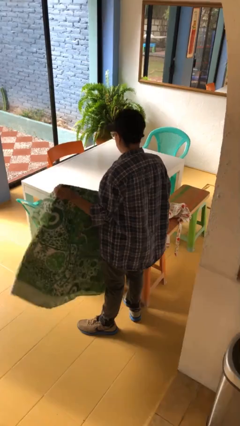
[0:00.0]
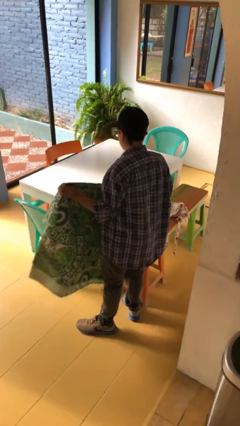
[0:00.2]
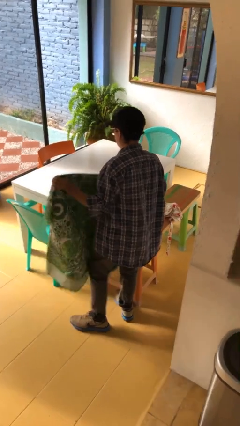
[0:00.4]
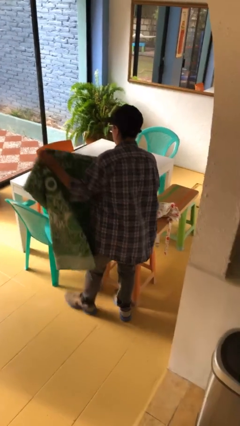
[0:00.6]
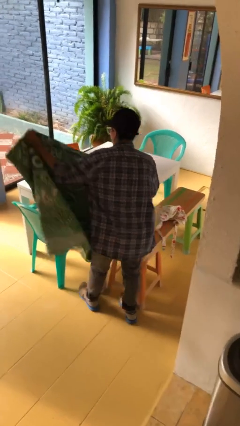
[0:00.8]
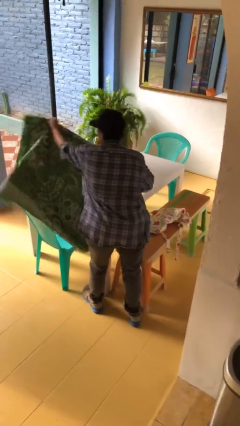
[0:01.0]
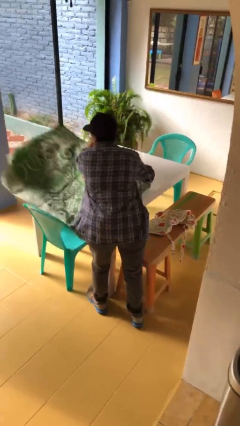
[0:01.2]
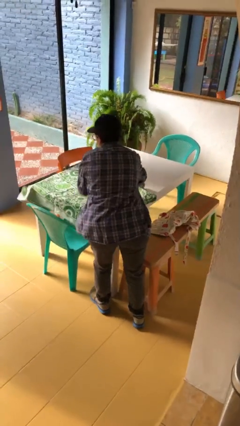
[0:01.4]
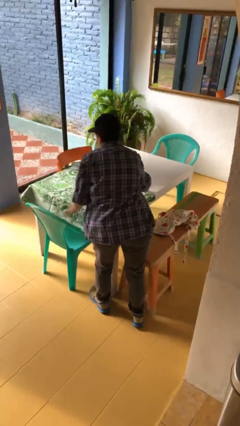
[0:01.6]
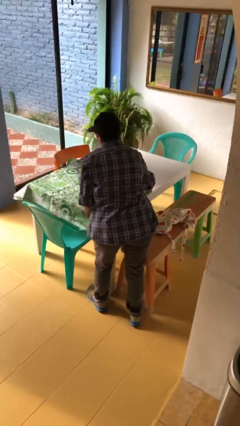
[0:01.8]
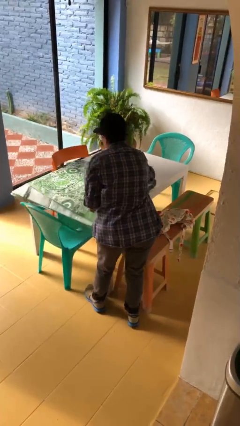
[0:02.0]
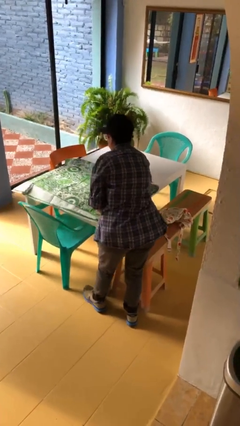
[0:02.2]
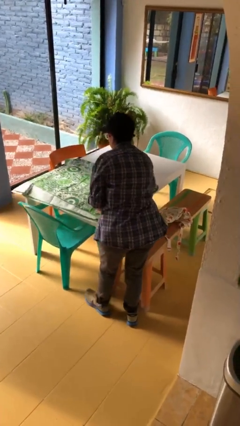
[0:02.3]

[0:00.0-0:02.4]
person spreads tablecloth

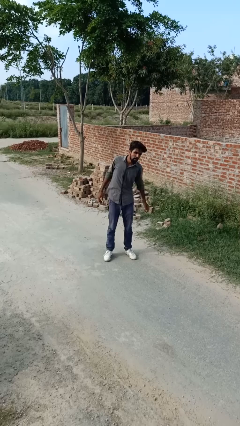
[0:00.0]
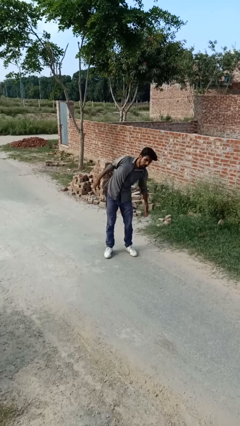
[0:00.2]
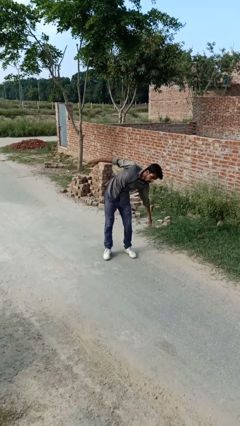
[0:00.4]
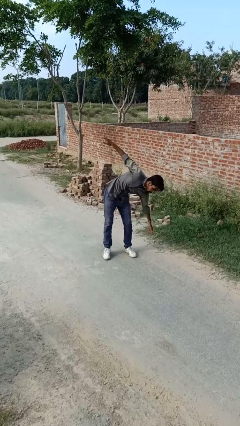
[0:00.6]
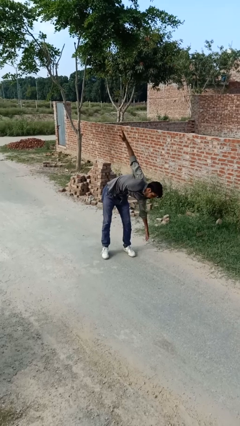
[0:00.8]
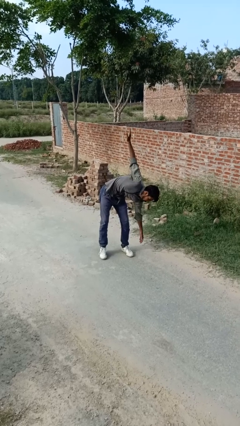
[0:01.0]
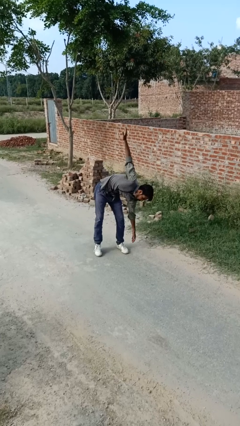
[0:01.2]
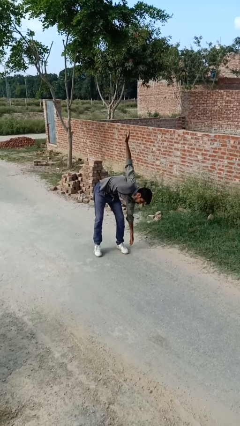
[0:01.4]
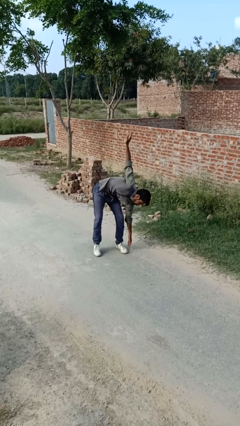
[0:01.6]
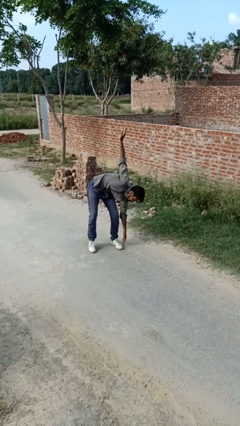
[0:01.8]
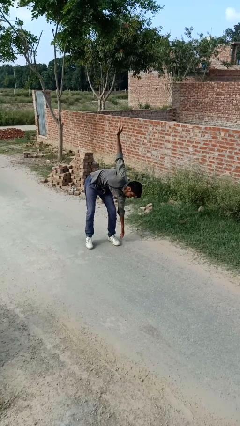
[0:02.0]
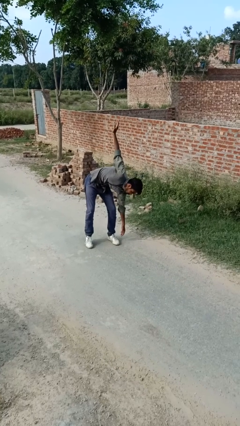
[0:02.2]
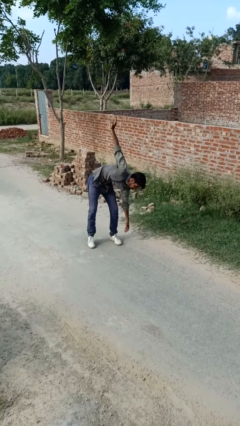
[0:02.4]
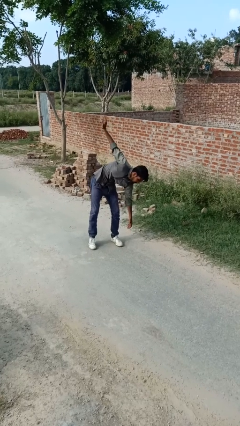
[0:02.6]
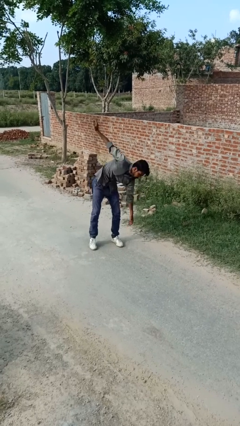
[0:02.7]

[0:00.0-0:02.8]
person stretches arms to side

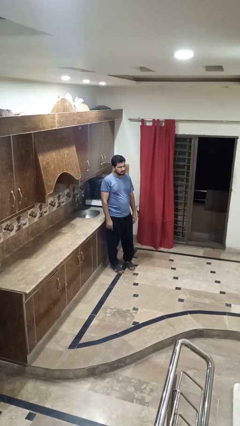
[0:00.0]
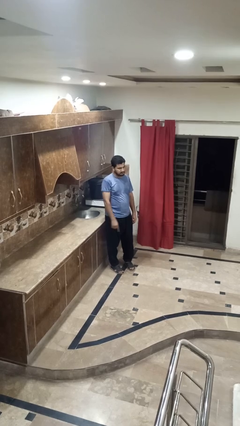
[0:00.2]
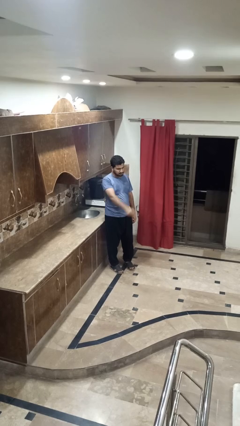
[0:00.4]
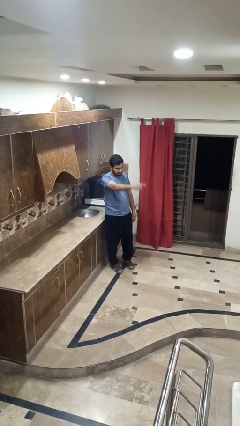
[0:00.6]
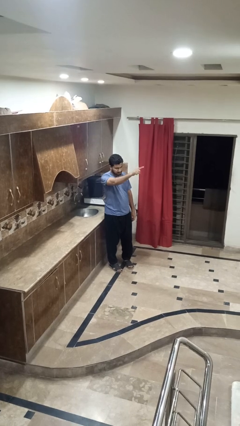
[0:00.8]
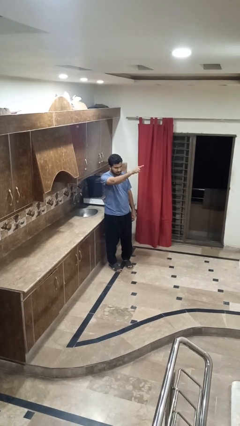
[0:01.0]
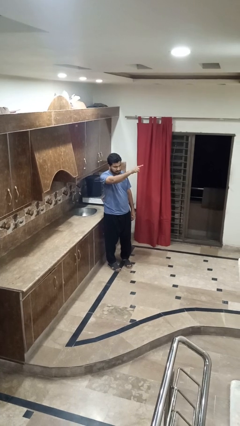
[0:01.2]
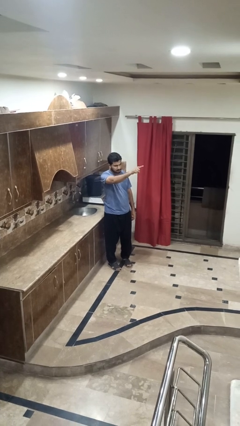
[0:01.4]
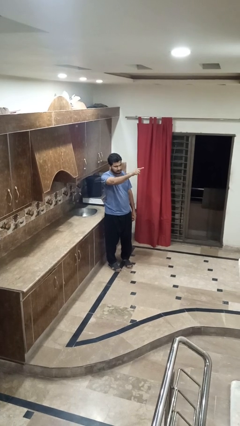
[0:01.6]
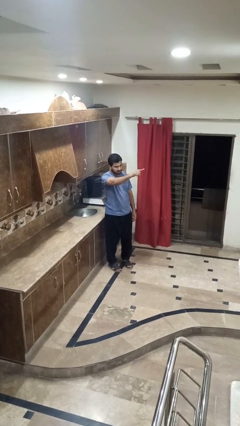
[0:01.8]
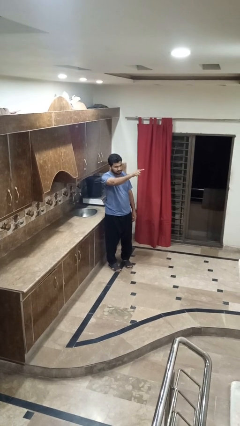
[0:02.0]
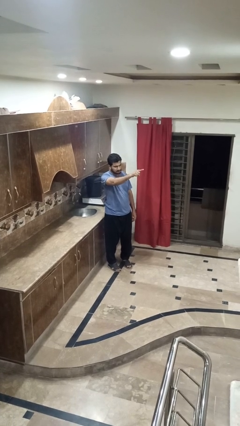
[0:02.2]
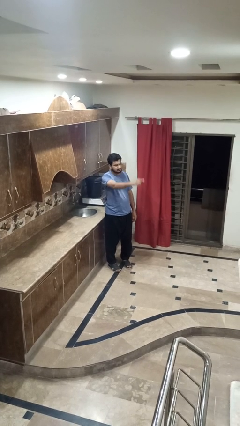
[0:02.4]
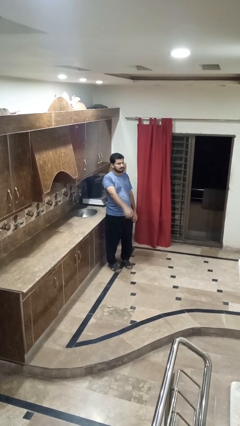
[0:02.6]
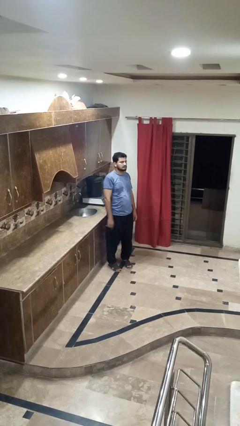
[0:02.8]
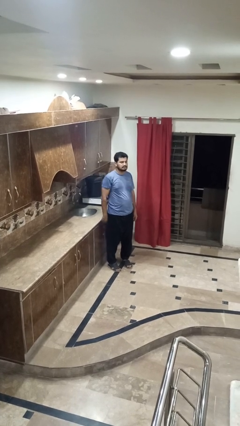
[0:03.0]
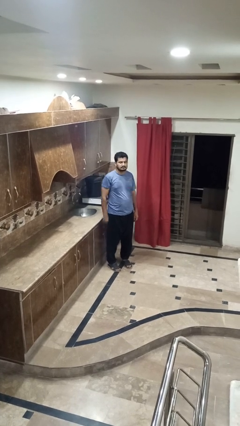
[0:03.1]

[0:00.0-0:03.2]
person points at person

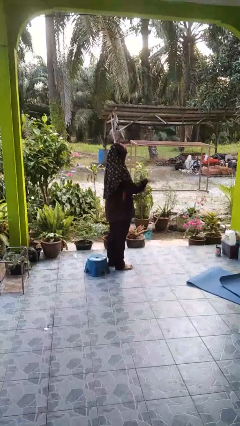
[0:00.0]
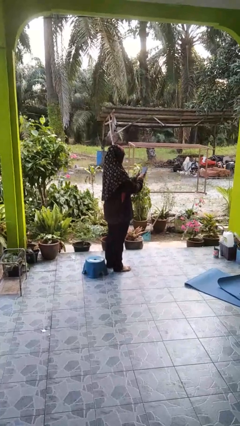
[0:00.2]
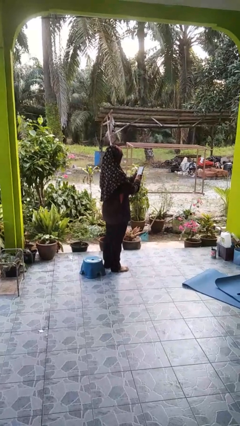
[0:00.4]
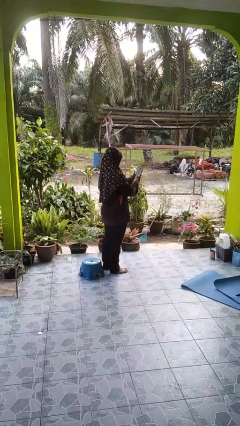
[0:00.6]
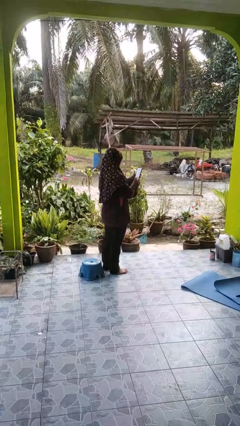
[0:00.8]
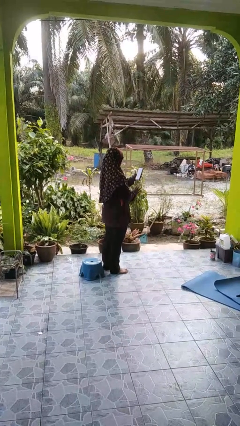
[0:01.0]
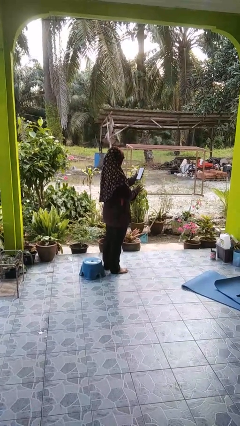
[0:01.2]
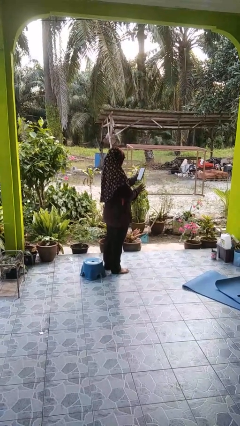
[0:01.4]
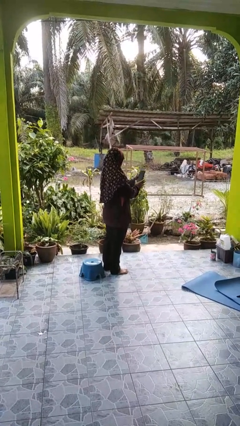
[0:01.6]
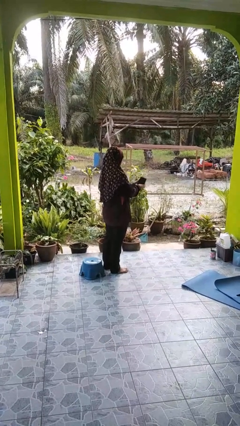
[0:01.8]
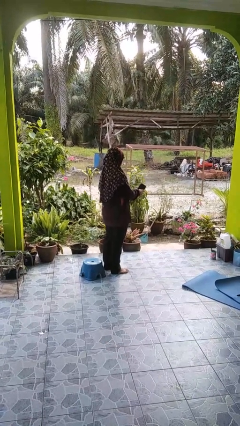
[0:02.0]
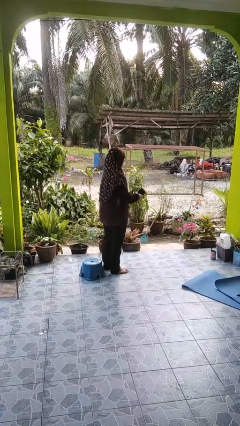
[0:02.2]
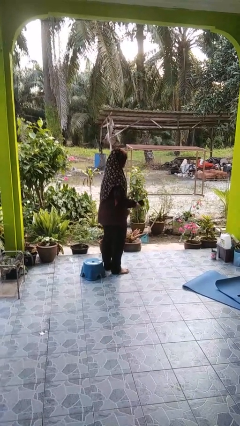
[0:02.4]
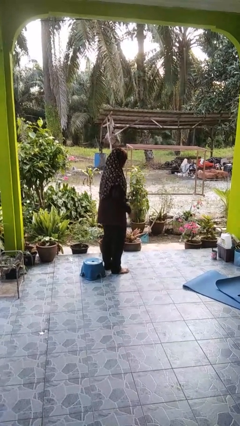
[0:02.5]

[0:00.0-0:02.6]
person takes phone from pocket

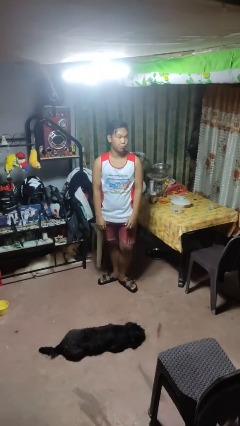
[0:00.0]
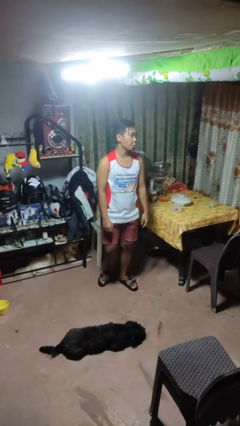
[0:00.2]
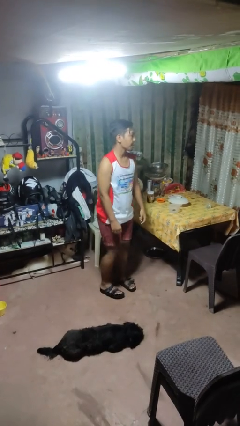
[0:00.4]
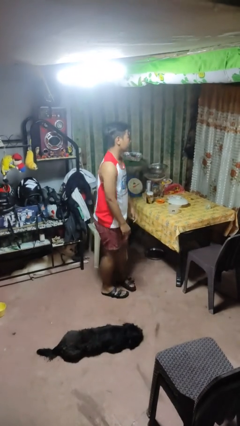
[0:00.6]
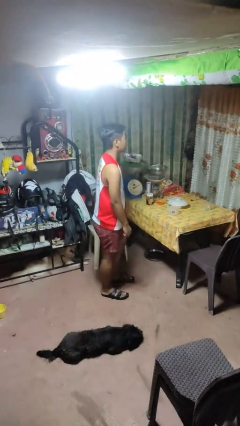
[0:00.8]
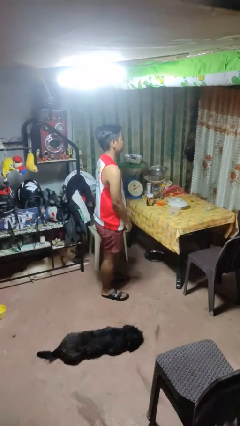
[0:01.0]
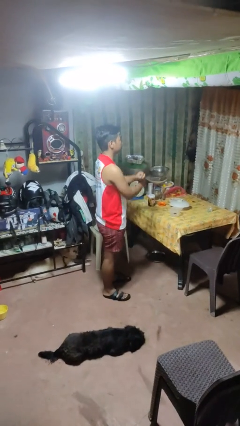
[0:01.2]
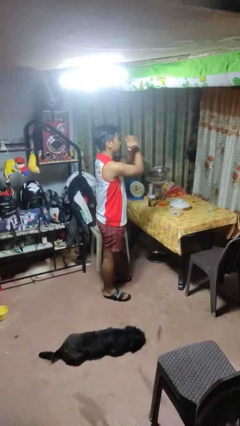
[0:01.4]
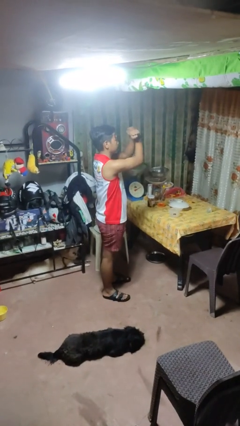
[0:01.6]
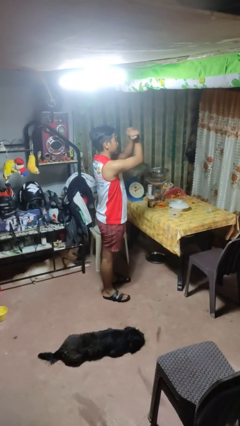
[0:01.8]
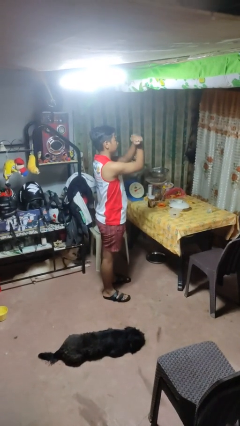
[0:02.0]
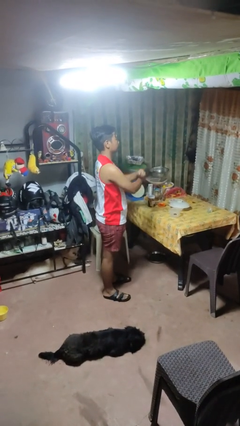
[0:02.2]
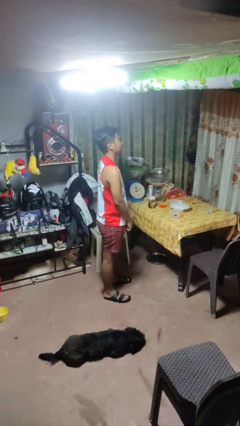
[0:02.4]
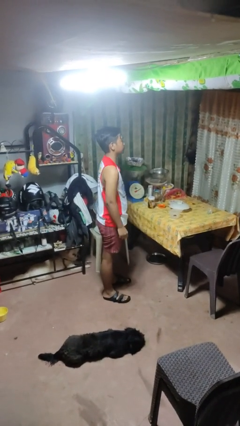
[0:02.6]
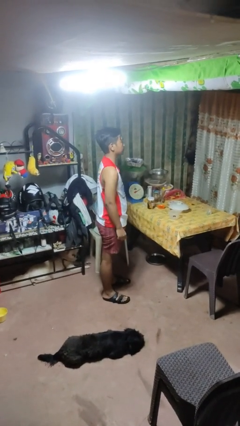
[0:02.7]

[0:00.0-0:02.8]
person gestures arms x

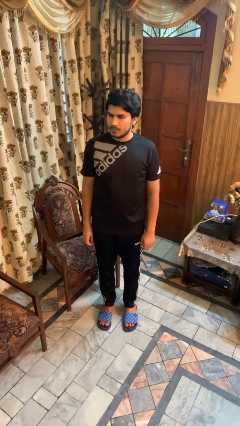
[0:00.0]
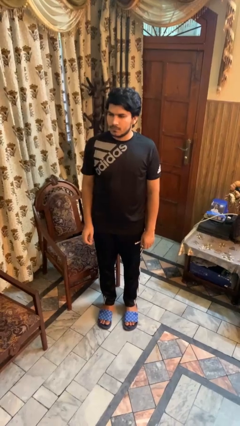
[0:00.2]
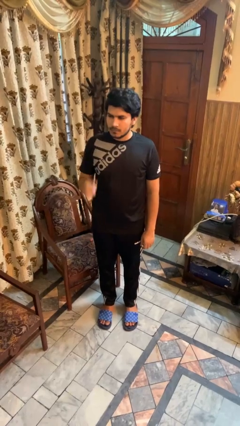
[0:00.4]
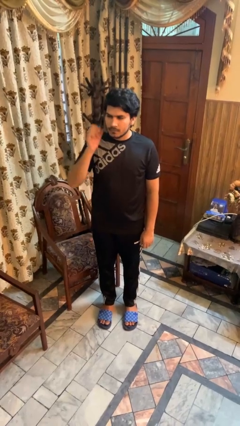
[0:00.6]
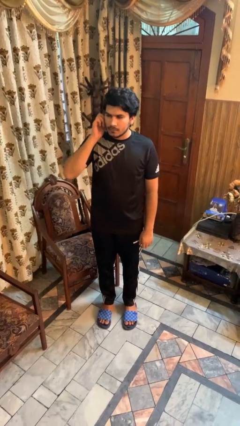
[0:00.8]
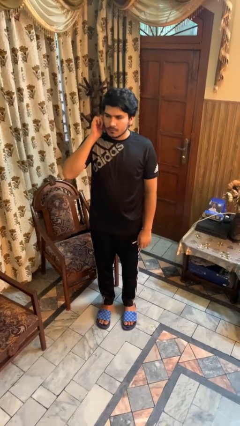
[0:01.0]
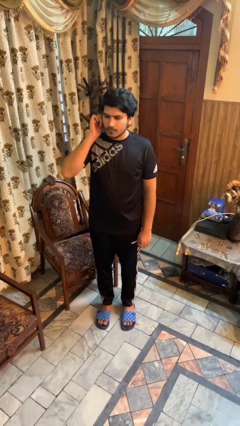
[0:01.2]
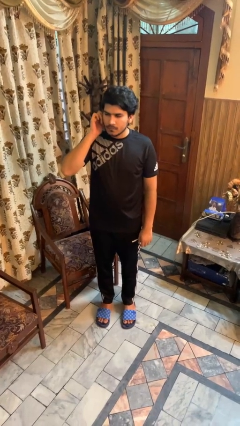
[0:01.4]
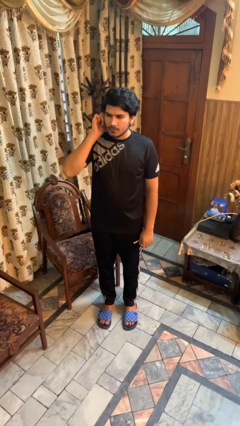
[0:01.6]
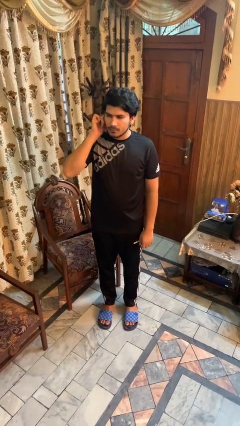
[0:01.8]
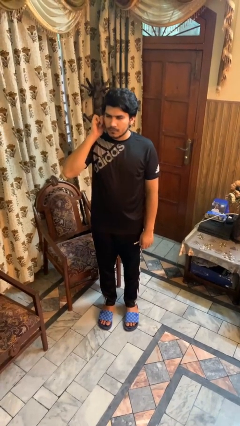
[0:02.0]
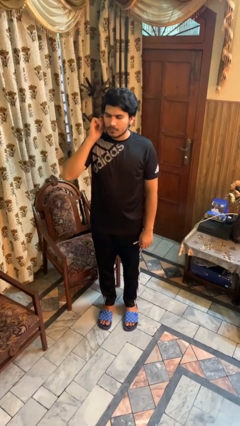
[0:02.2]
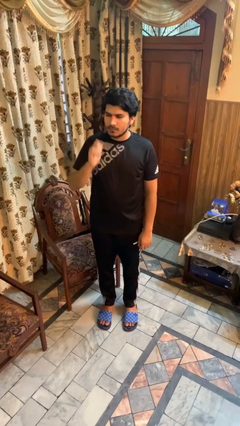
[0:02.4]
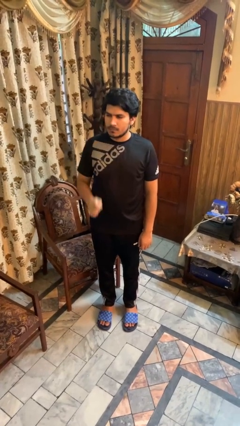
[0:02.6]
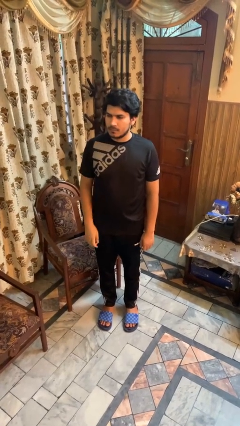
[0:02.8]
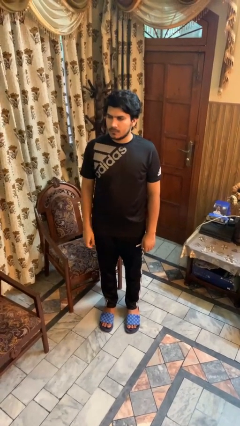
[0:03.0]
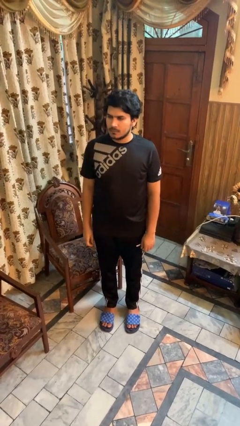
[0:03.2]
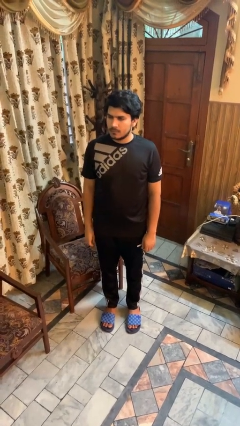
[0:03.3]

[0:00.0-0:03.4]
person touches earlobe
